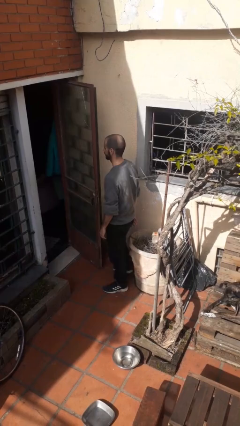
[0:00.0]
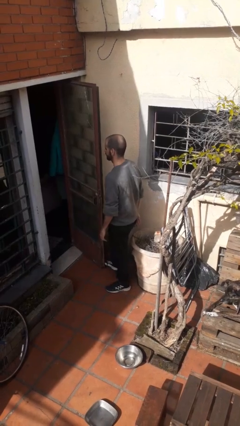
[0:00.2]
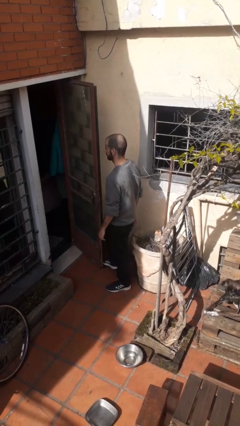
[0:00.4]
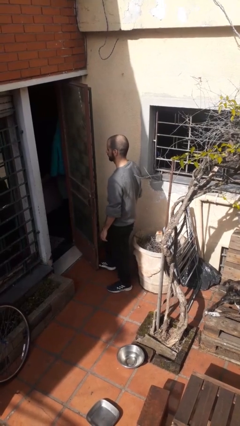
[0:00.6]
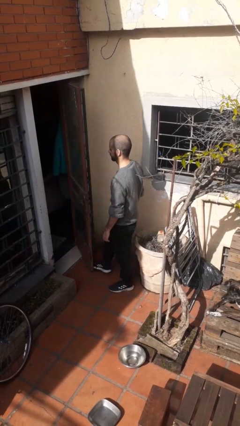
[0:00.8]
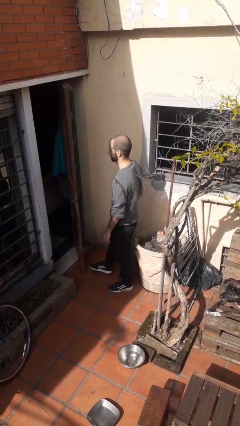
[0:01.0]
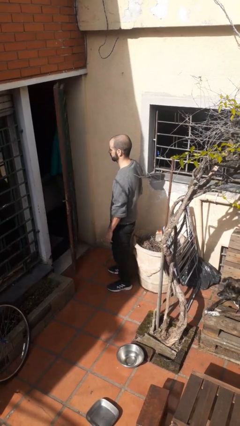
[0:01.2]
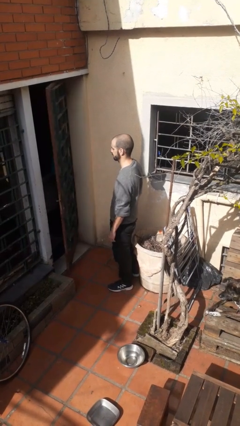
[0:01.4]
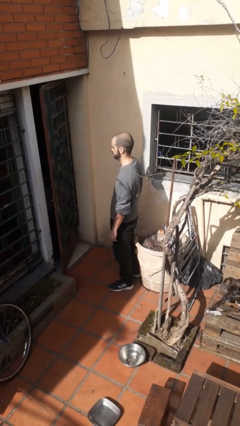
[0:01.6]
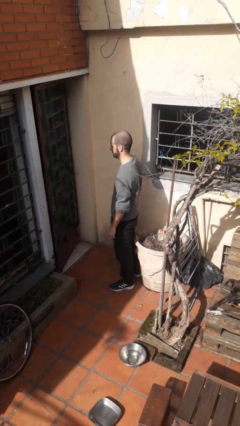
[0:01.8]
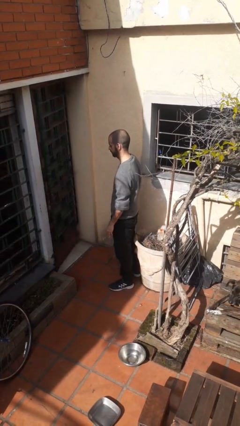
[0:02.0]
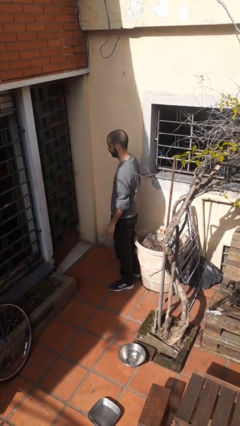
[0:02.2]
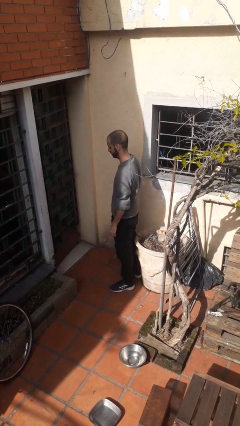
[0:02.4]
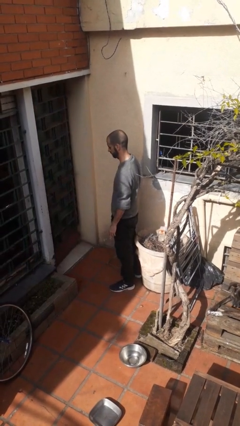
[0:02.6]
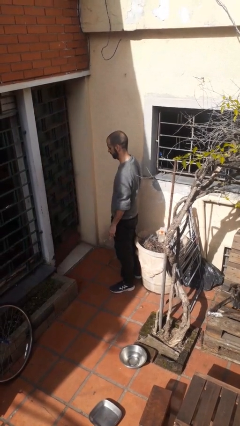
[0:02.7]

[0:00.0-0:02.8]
person closes door with foot

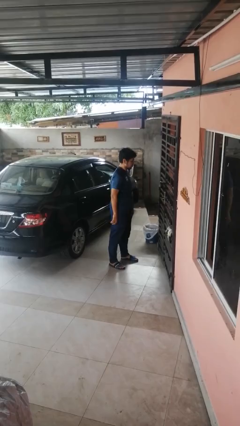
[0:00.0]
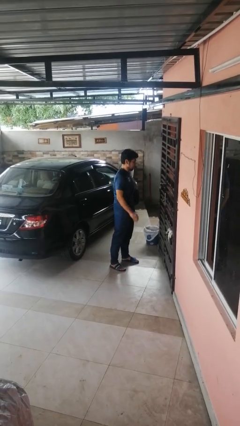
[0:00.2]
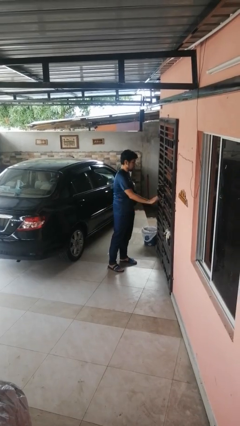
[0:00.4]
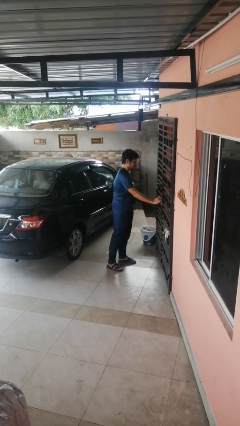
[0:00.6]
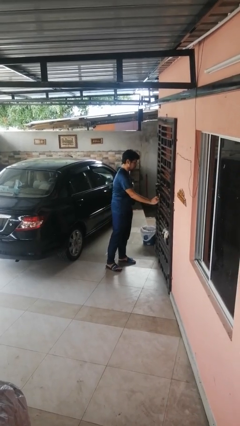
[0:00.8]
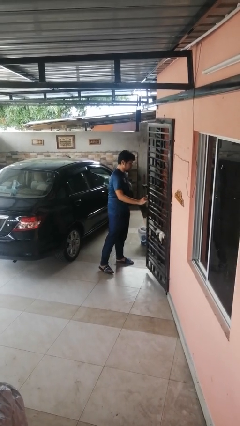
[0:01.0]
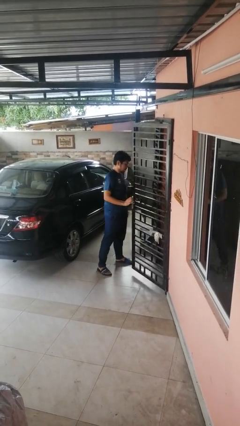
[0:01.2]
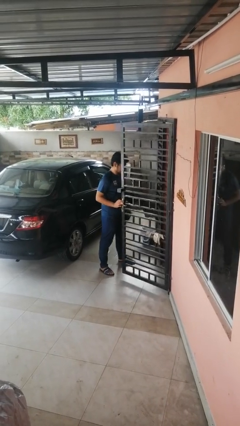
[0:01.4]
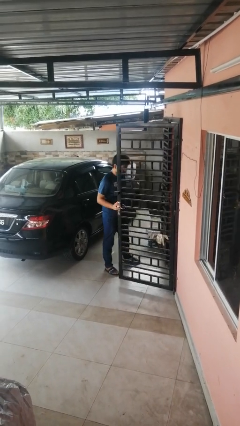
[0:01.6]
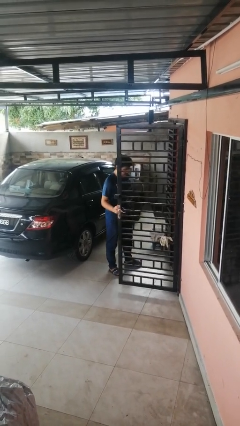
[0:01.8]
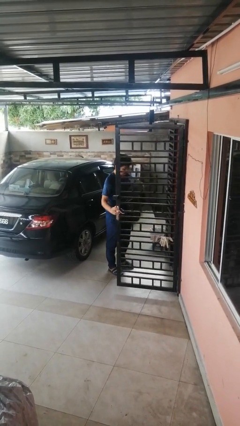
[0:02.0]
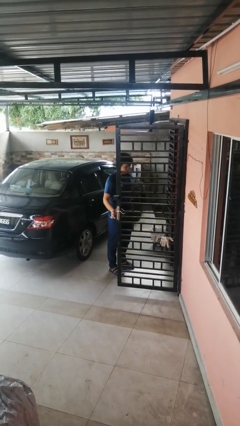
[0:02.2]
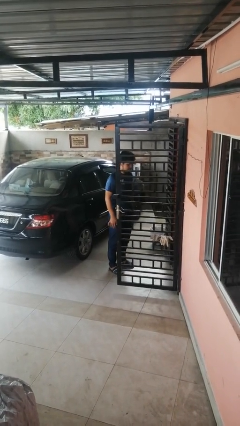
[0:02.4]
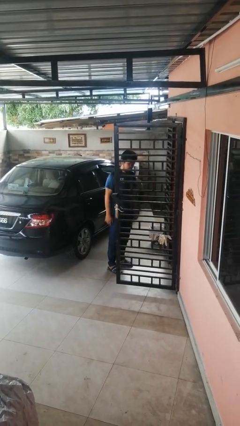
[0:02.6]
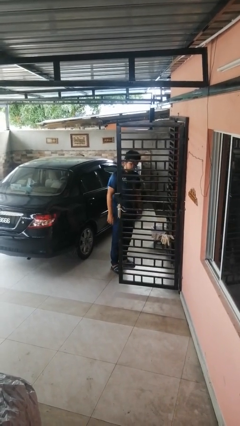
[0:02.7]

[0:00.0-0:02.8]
person opens gate

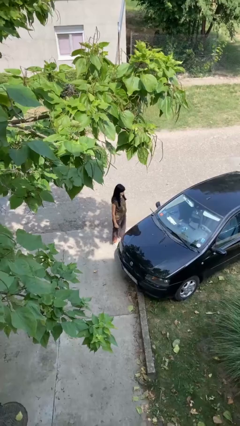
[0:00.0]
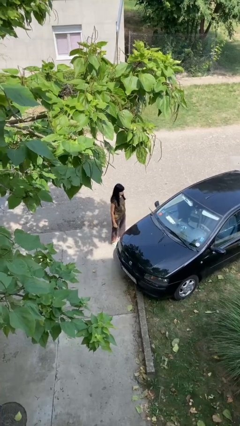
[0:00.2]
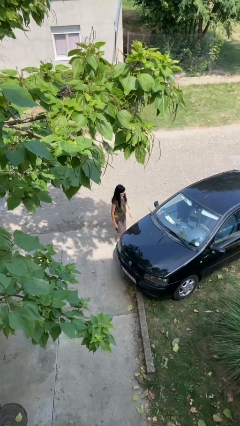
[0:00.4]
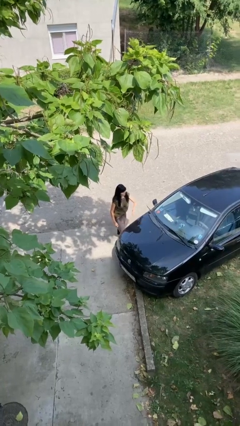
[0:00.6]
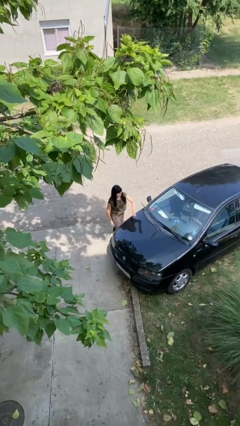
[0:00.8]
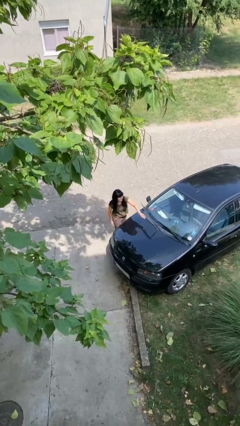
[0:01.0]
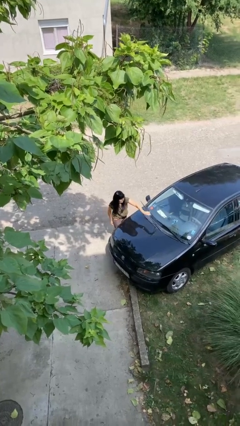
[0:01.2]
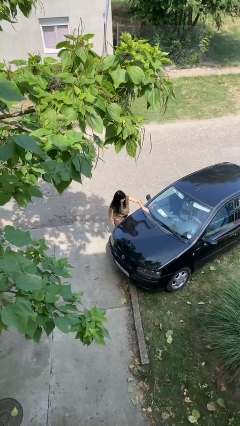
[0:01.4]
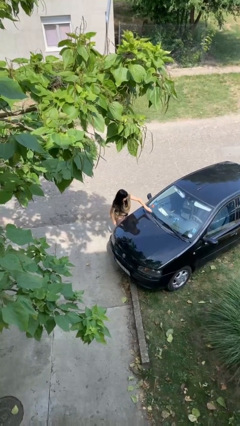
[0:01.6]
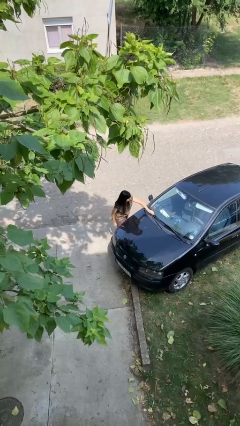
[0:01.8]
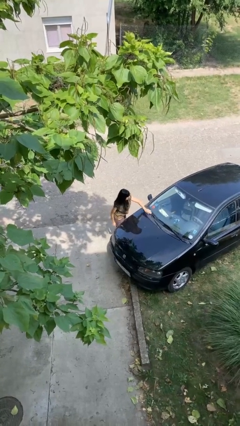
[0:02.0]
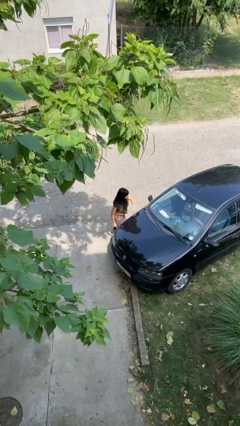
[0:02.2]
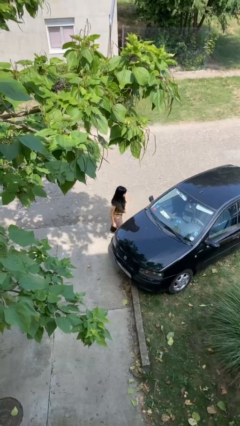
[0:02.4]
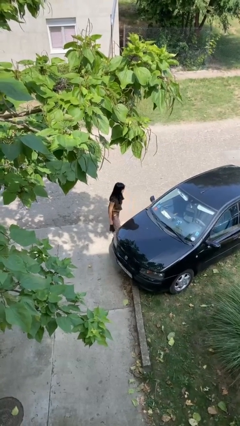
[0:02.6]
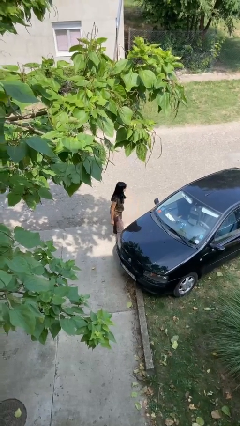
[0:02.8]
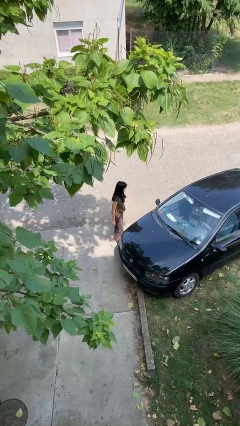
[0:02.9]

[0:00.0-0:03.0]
person flips down car wipers

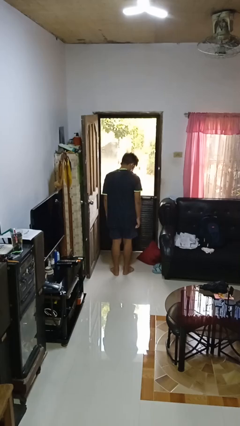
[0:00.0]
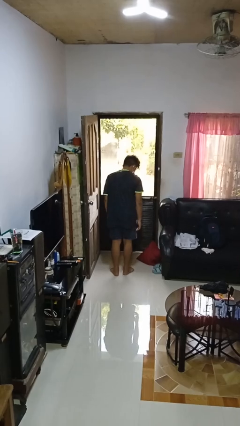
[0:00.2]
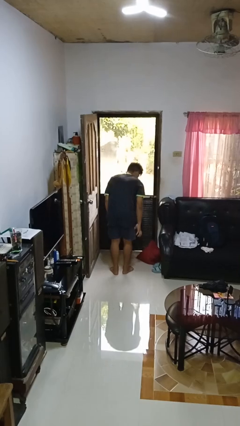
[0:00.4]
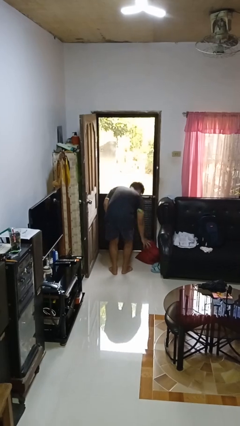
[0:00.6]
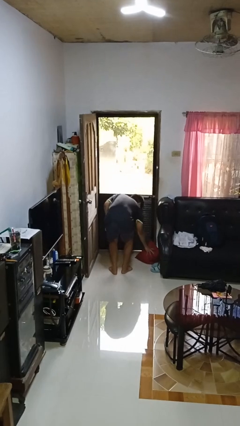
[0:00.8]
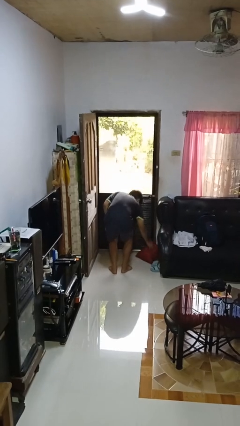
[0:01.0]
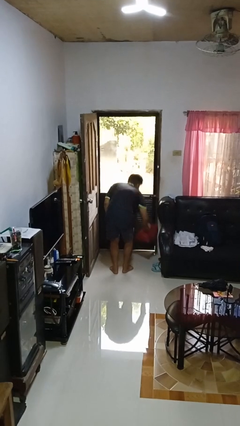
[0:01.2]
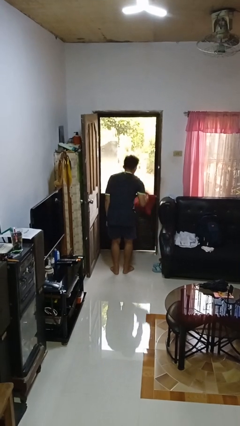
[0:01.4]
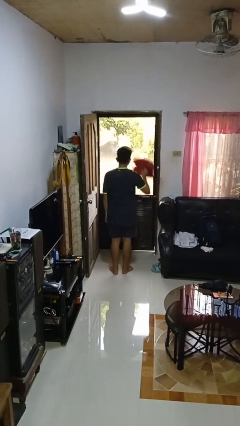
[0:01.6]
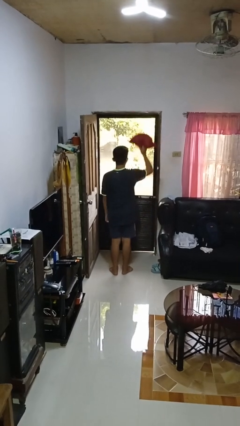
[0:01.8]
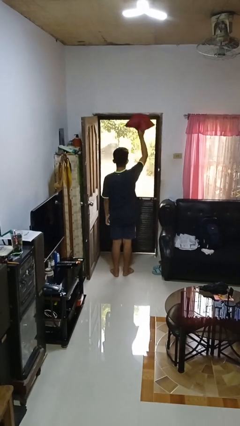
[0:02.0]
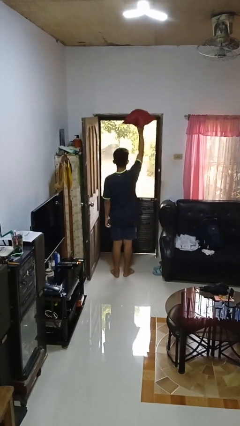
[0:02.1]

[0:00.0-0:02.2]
person picks up object from floor

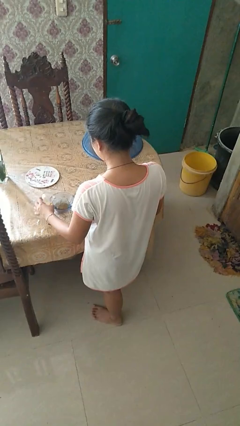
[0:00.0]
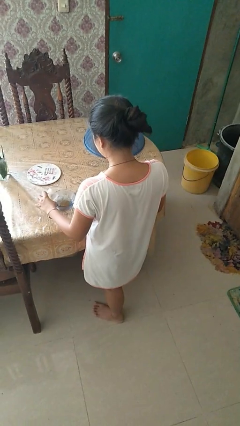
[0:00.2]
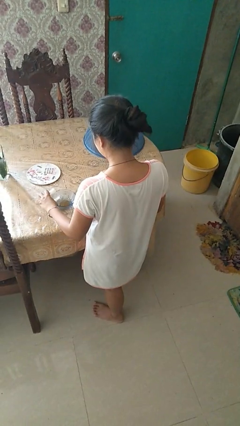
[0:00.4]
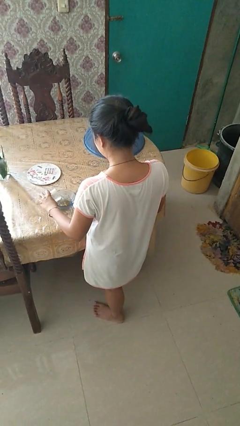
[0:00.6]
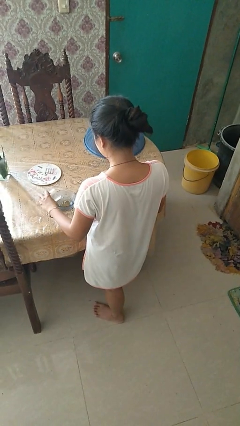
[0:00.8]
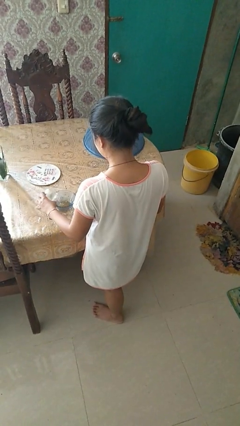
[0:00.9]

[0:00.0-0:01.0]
person pours into bowl

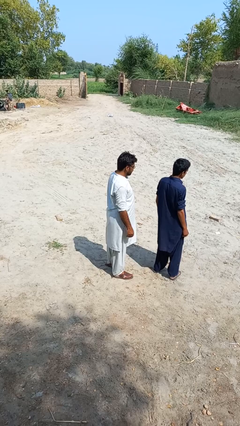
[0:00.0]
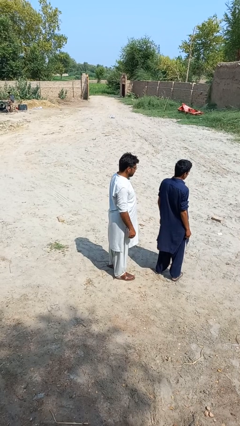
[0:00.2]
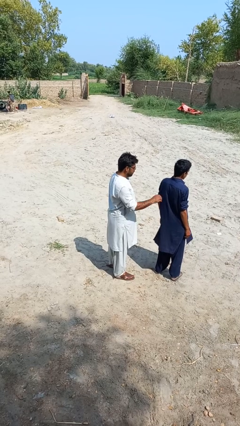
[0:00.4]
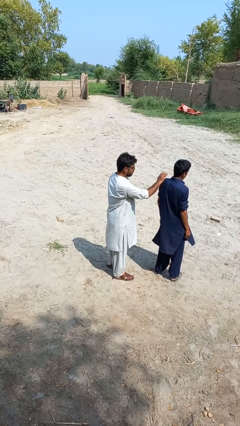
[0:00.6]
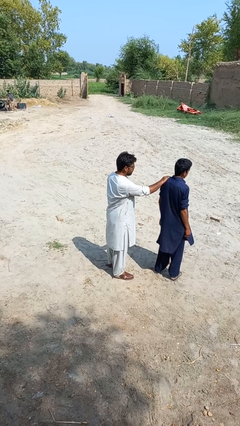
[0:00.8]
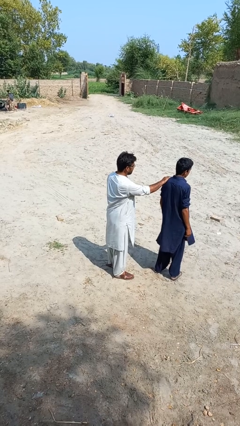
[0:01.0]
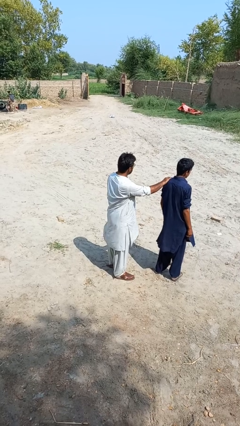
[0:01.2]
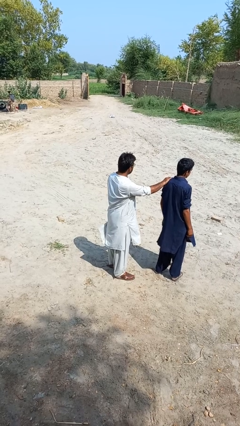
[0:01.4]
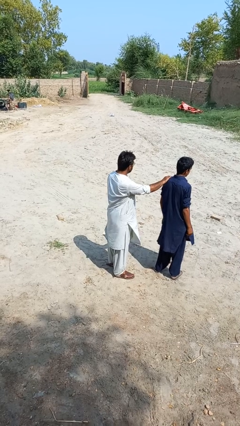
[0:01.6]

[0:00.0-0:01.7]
person grabs person by shoulder

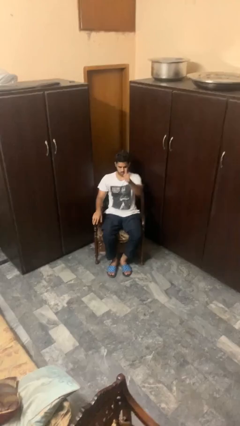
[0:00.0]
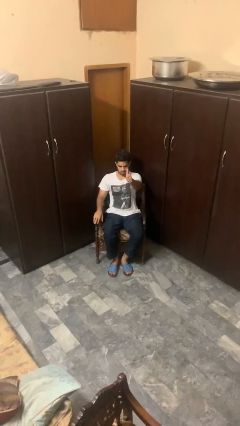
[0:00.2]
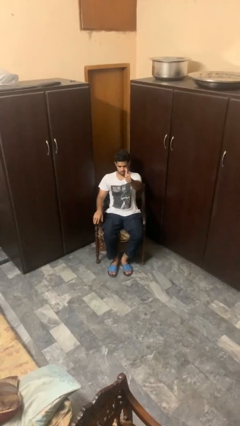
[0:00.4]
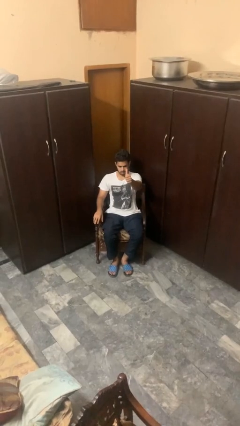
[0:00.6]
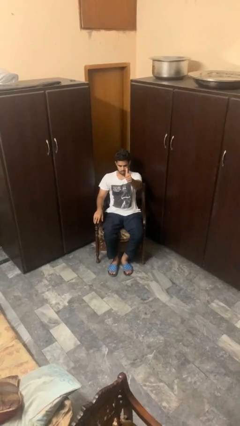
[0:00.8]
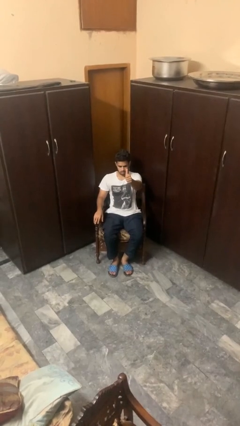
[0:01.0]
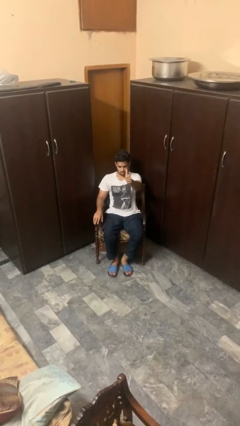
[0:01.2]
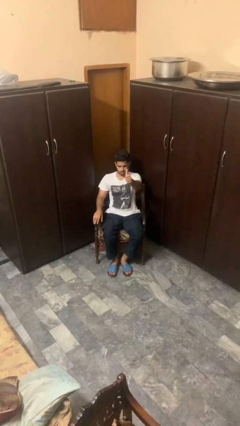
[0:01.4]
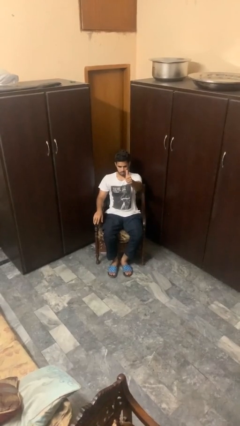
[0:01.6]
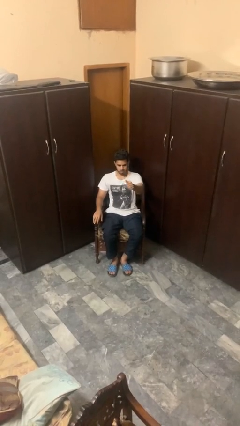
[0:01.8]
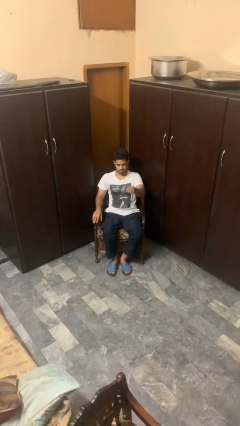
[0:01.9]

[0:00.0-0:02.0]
person gestures thumbs up

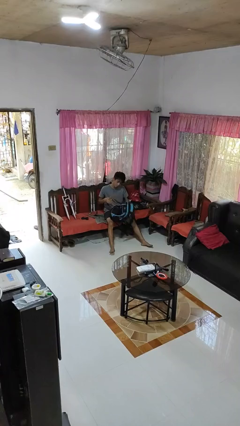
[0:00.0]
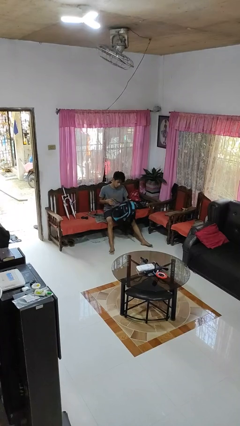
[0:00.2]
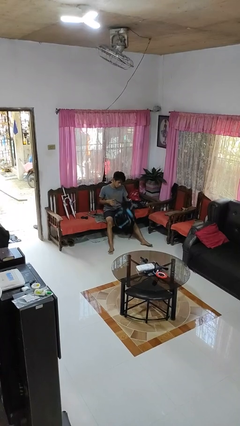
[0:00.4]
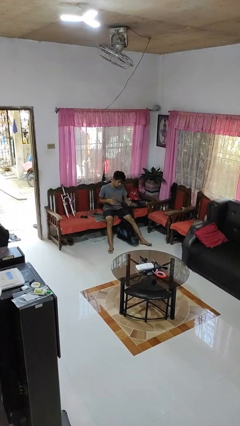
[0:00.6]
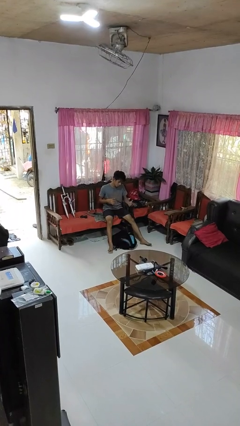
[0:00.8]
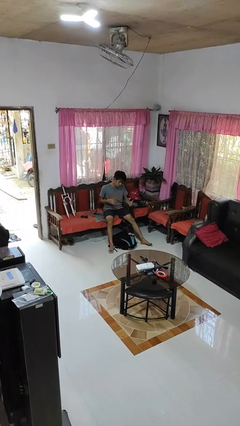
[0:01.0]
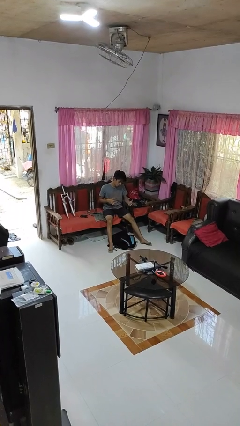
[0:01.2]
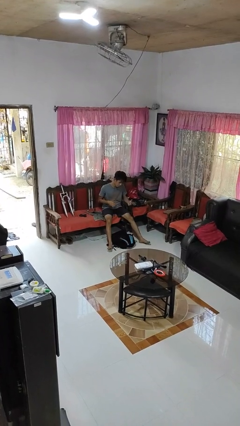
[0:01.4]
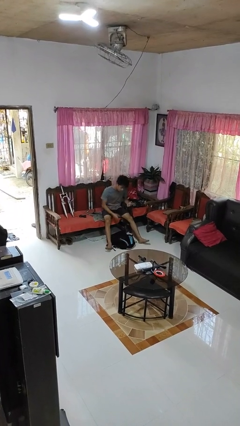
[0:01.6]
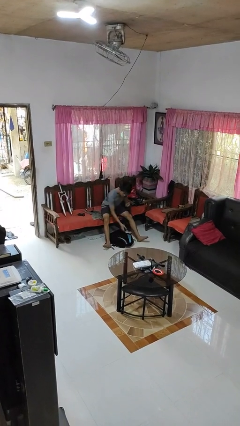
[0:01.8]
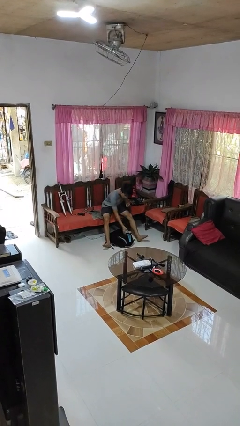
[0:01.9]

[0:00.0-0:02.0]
person drops object
